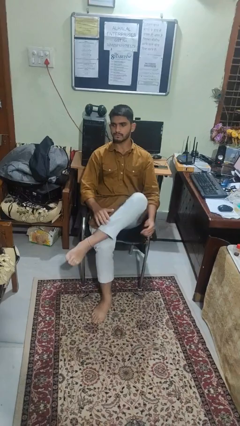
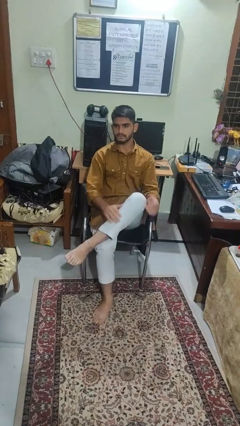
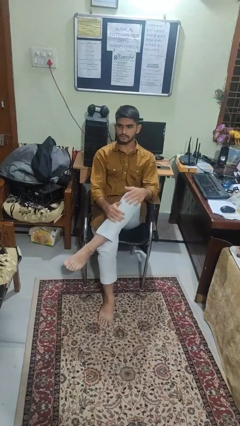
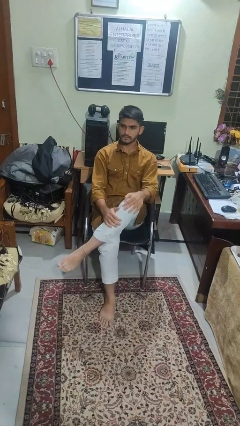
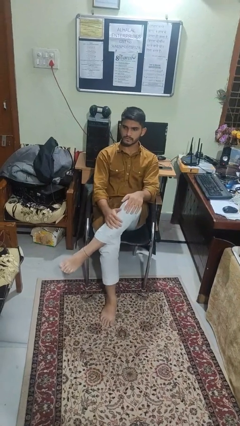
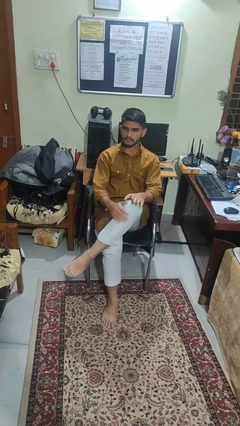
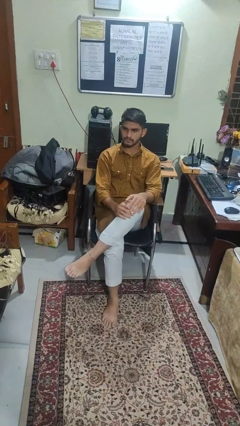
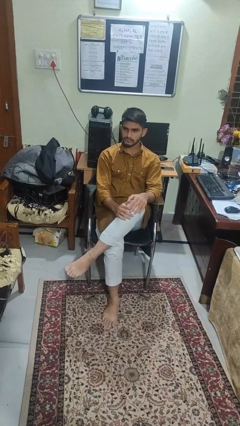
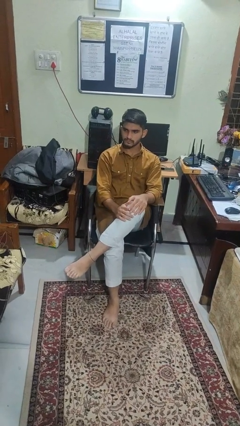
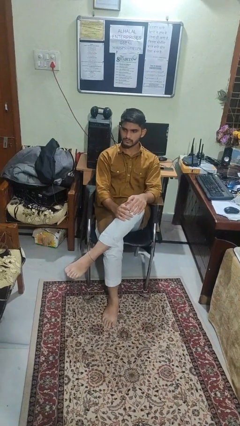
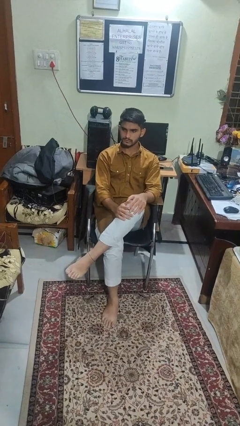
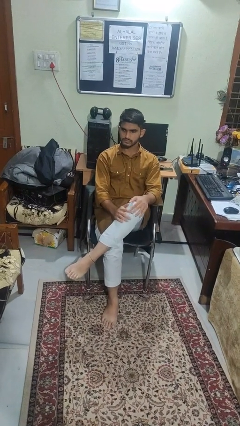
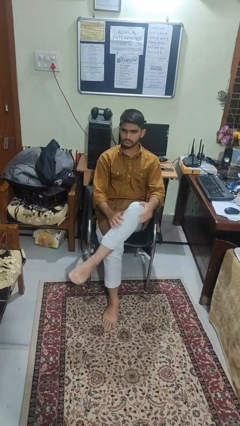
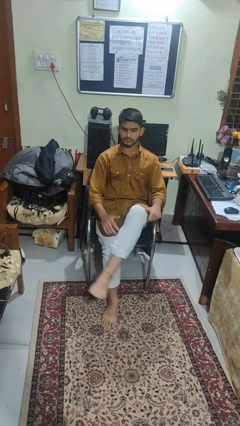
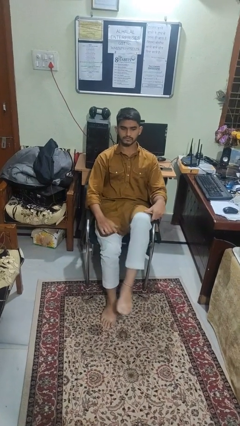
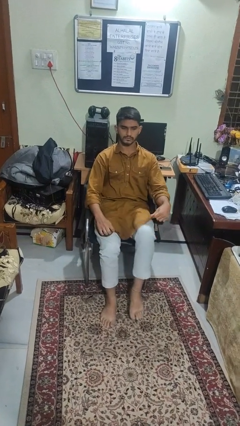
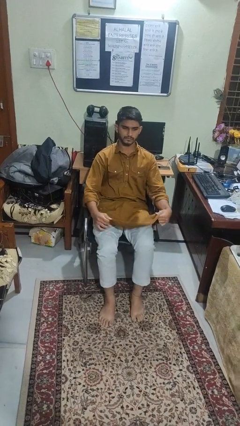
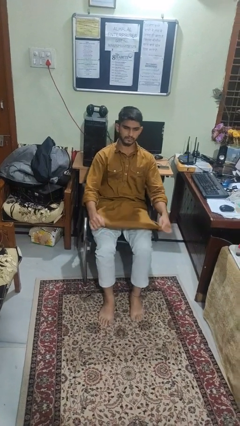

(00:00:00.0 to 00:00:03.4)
person crosses legs

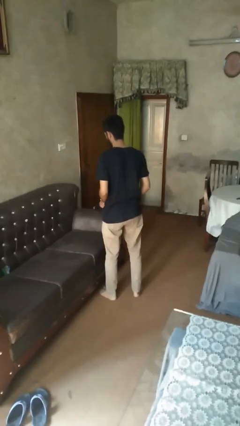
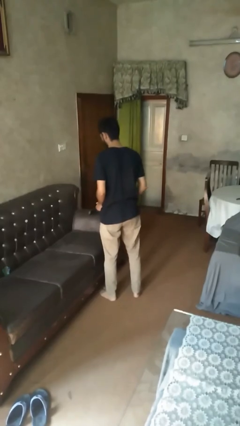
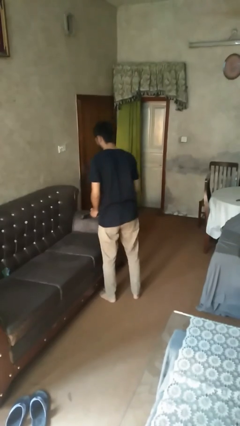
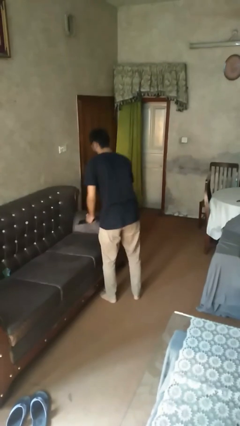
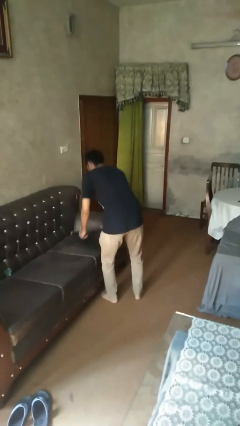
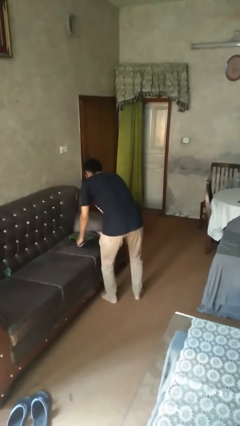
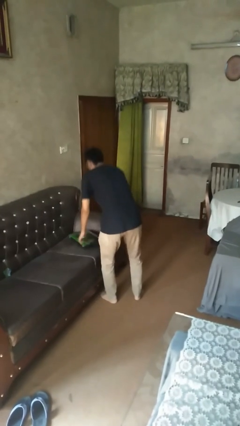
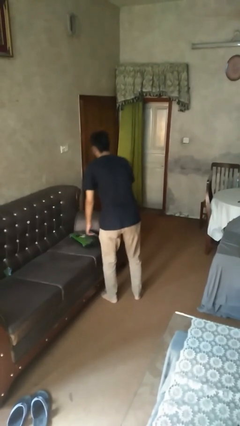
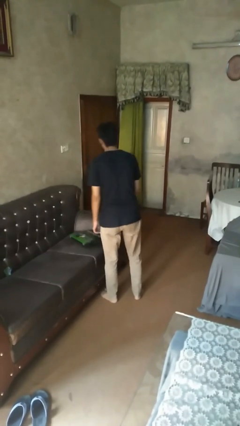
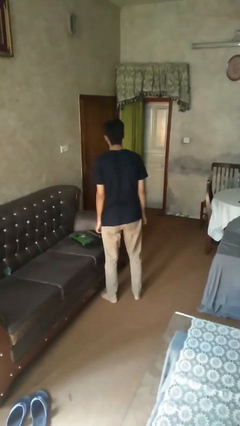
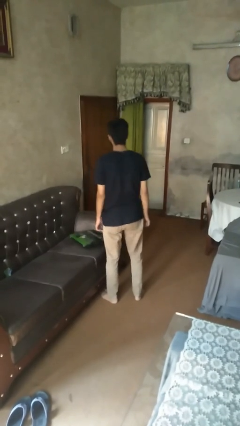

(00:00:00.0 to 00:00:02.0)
person puts down object on couch

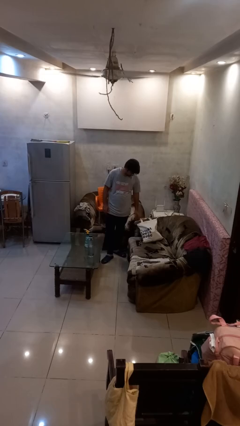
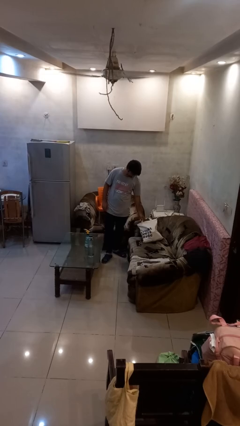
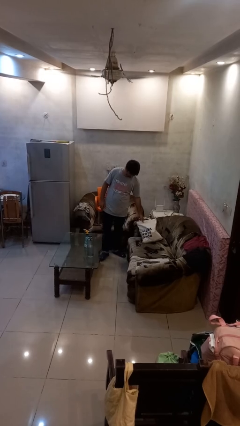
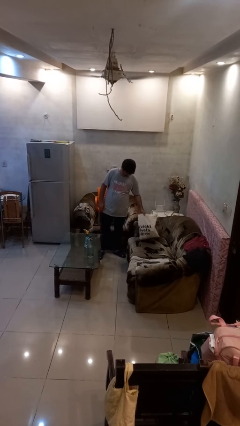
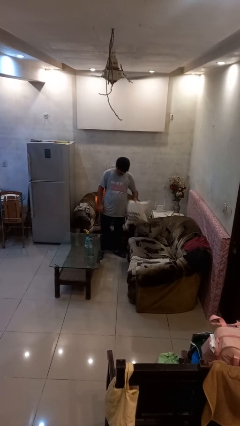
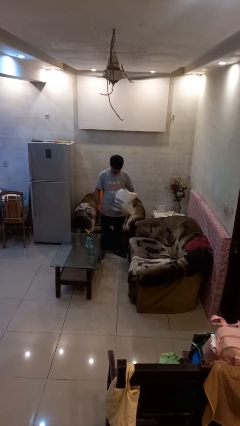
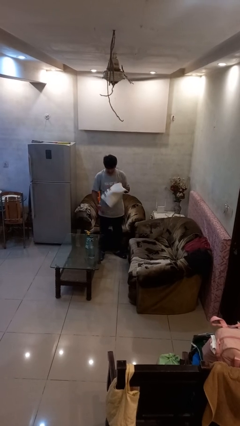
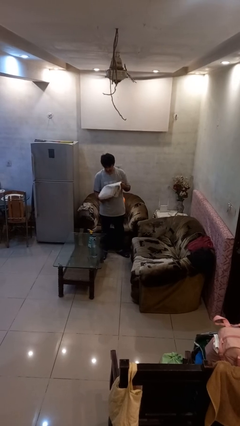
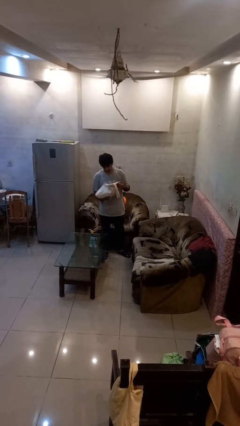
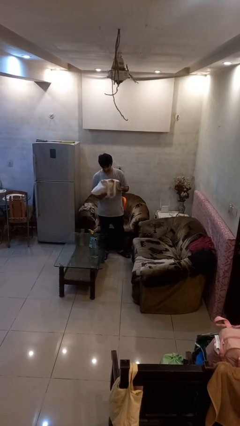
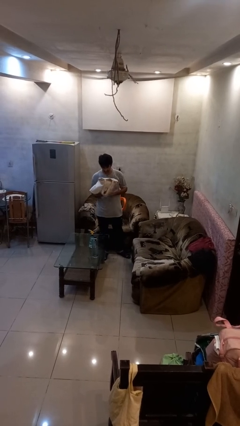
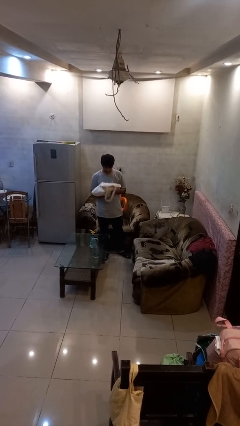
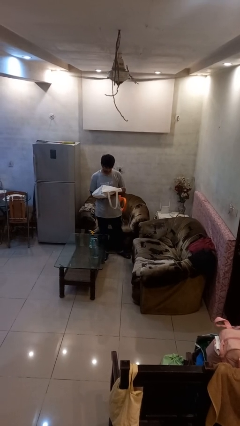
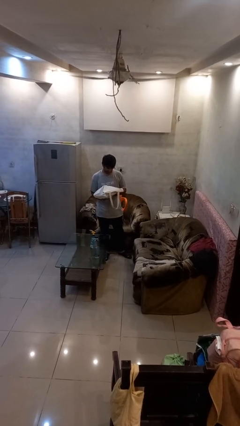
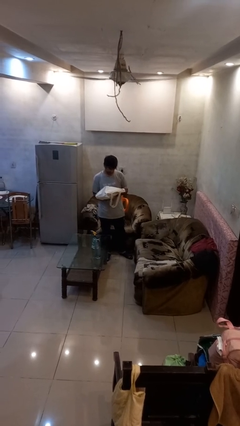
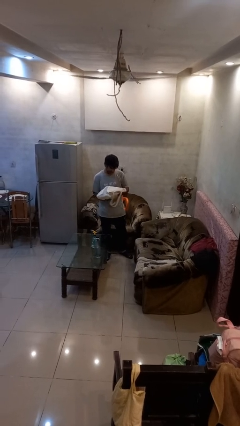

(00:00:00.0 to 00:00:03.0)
person picks up object from couch

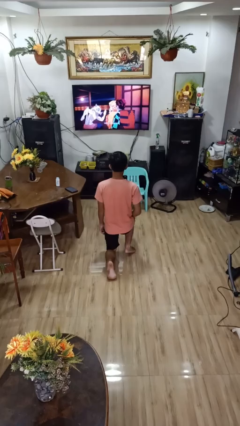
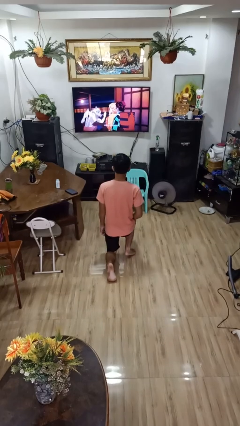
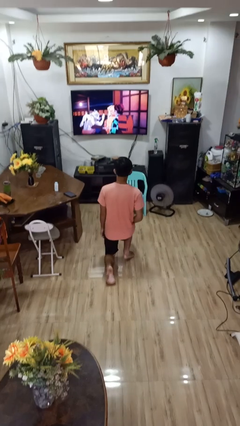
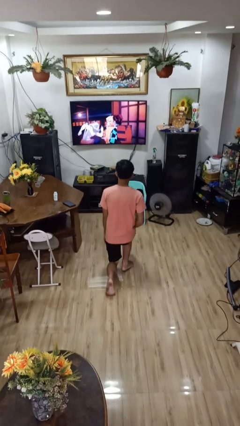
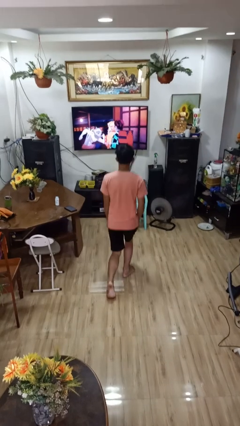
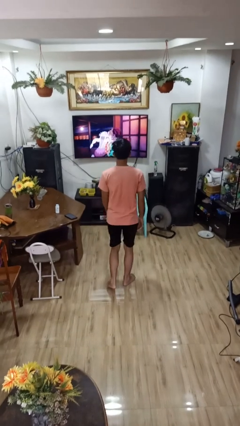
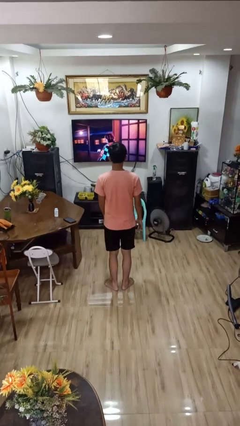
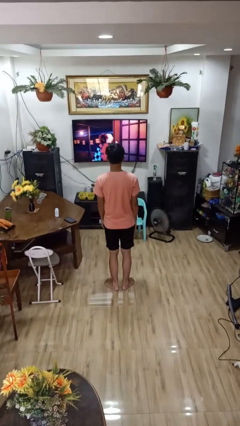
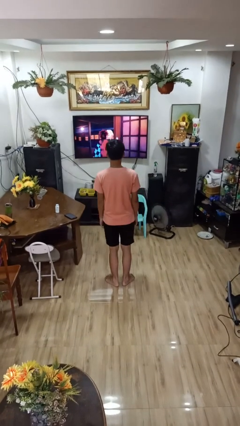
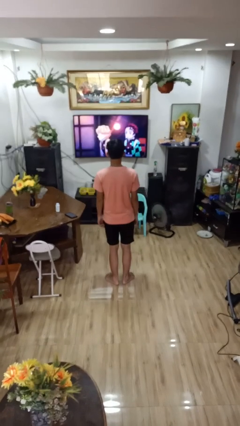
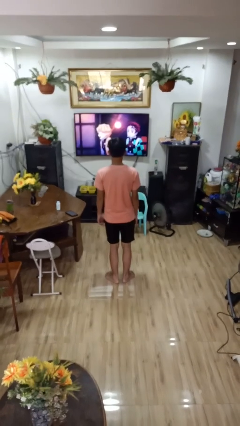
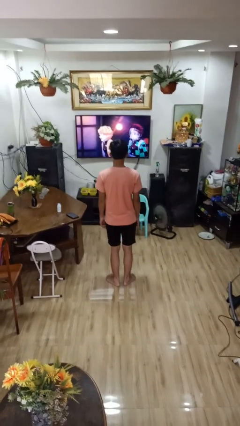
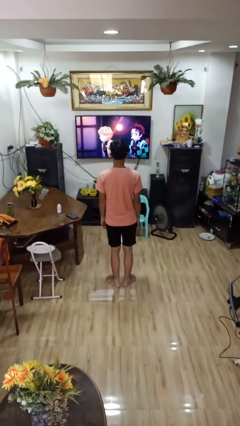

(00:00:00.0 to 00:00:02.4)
person stands up from floor

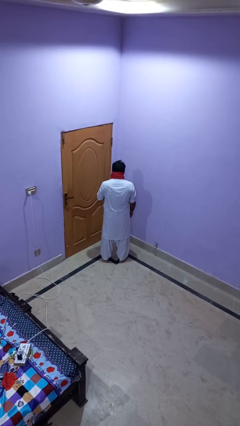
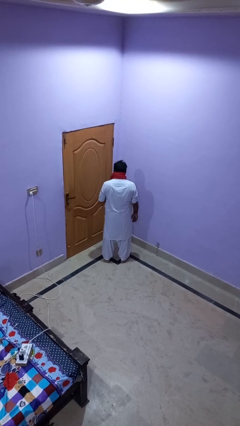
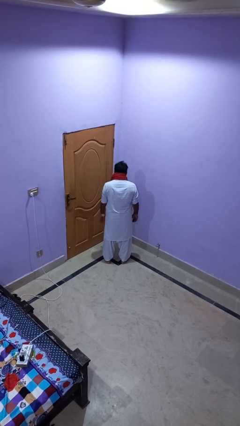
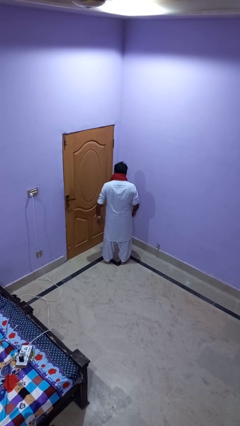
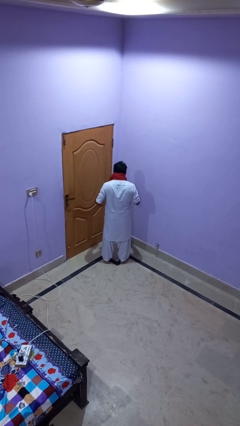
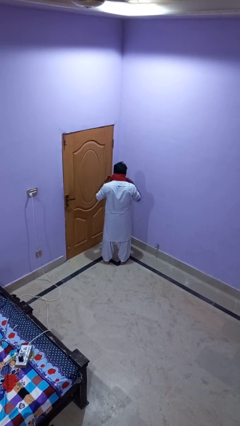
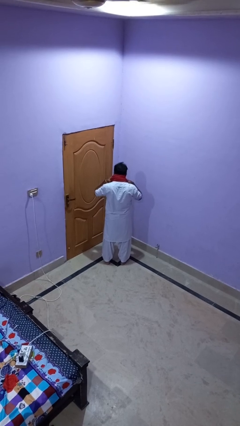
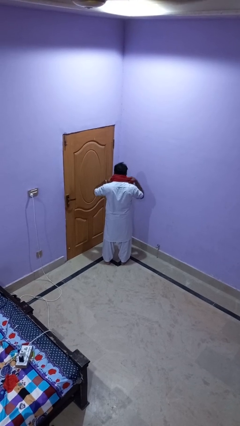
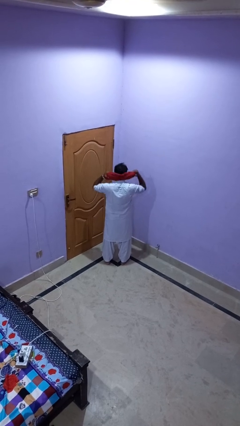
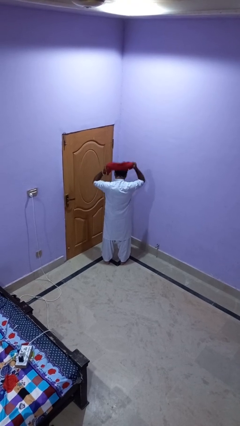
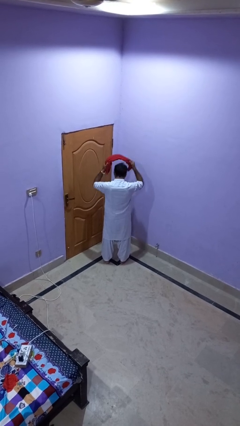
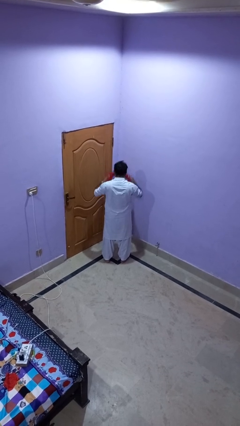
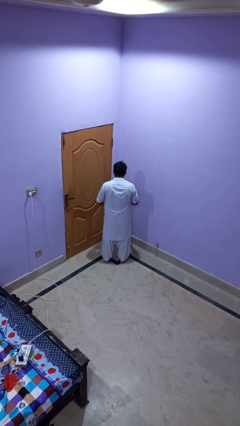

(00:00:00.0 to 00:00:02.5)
person takes off scarf

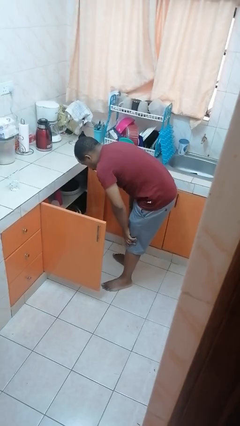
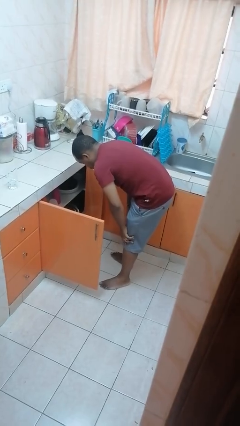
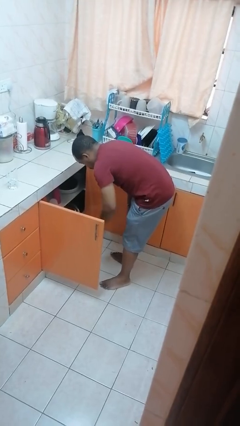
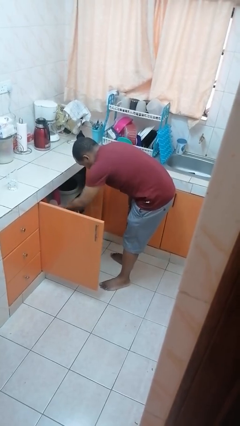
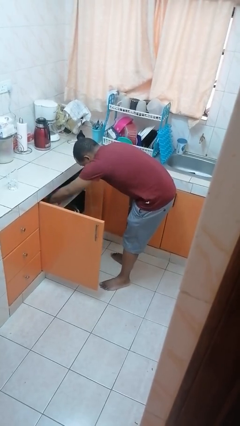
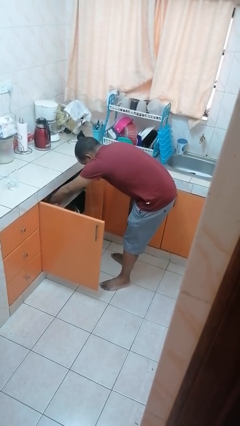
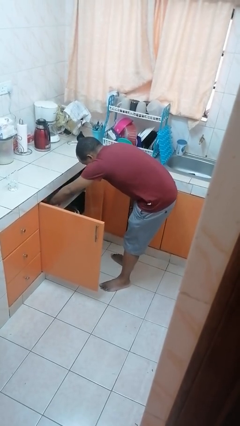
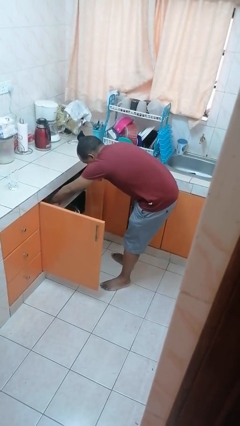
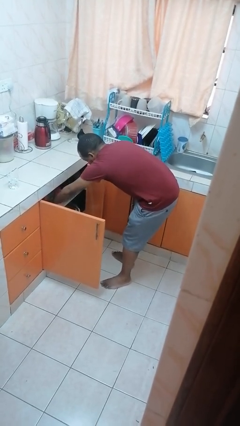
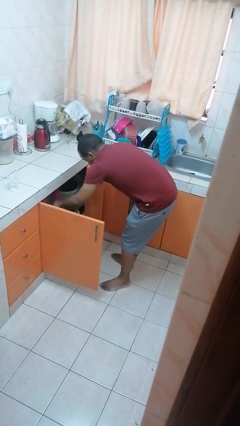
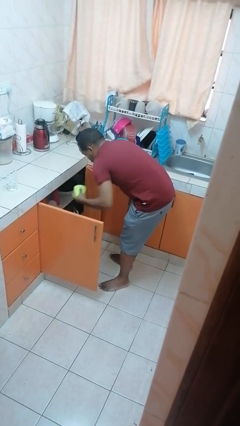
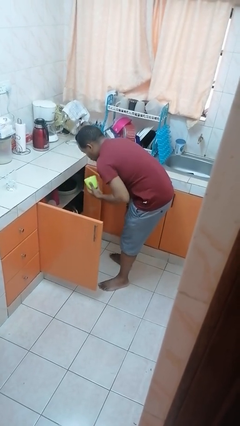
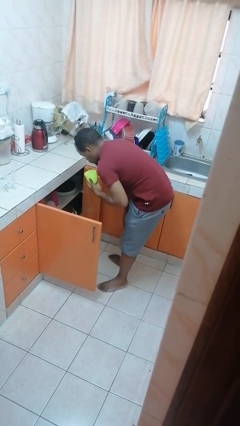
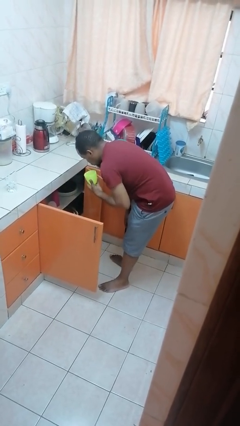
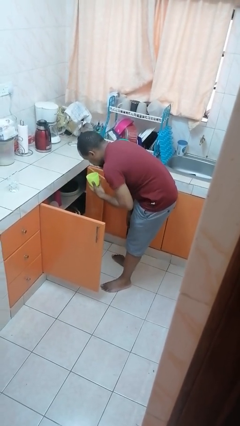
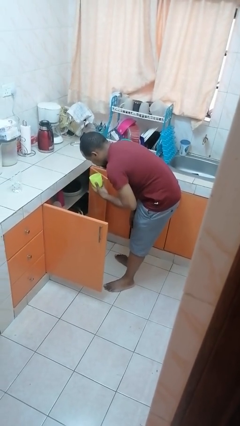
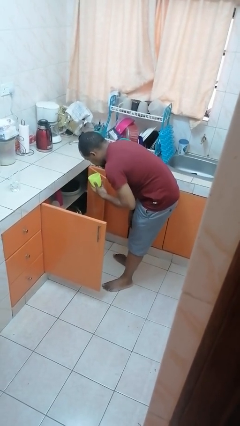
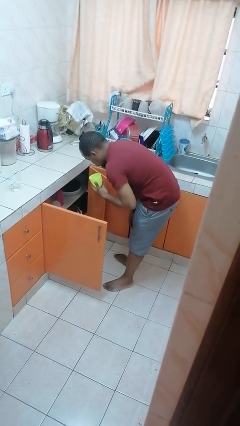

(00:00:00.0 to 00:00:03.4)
person takes object from cabinet

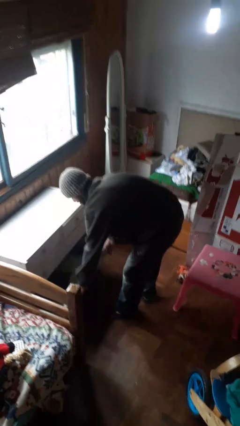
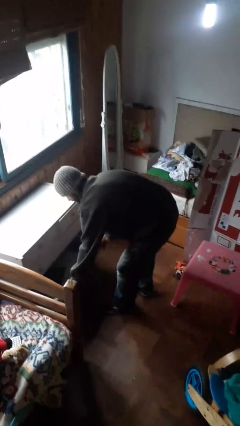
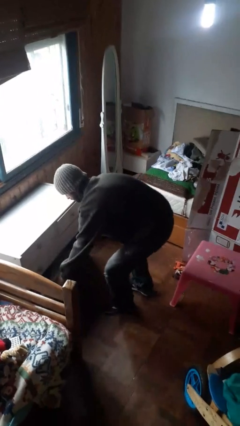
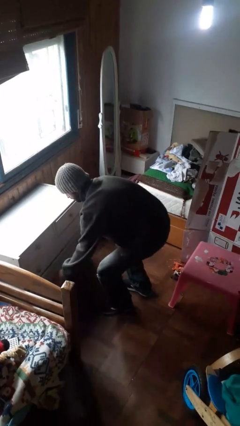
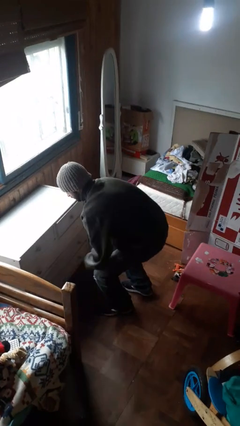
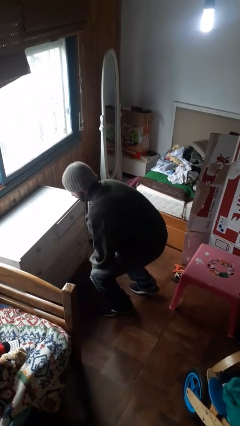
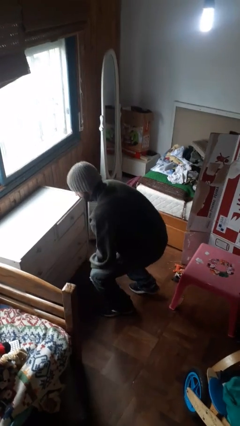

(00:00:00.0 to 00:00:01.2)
person closes dresser drawer
